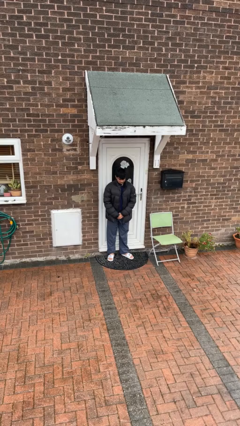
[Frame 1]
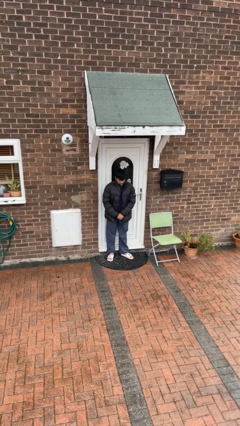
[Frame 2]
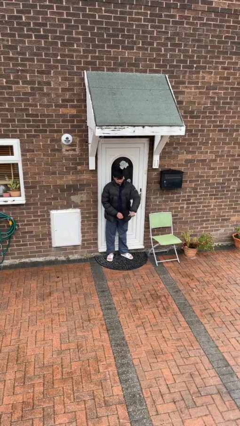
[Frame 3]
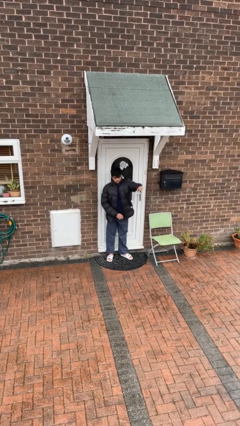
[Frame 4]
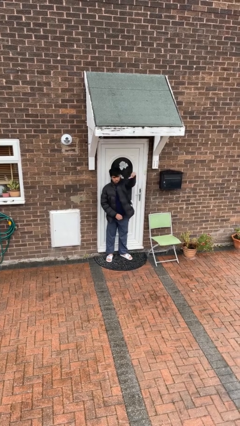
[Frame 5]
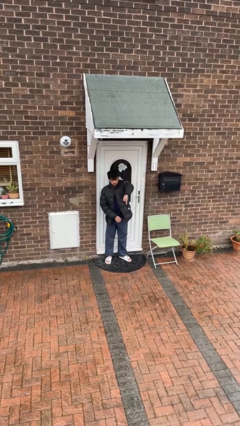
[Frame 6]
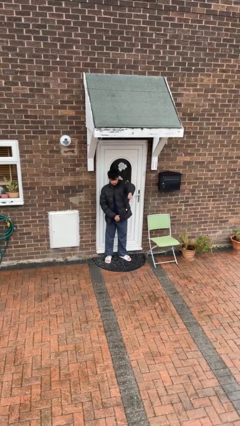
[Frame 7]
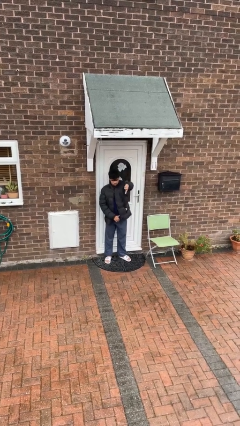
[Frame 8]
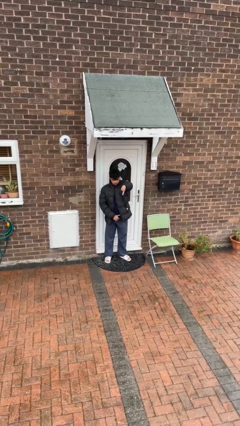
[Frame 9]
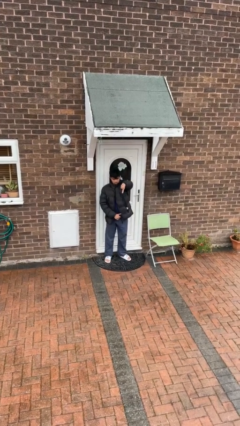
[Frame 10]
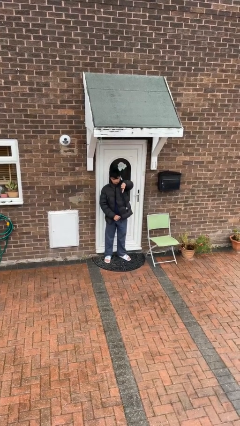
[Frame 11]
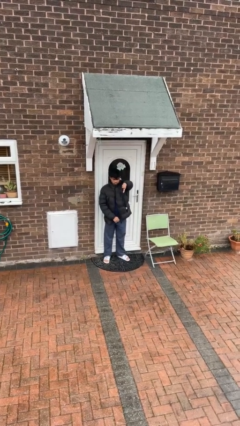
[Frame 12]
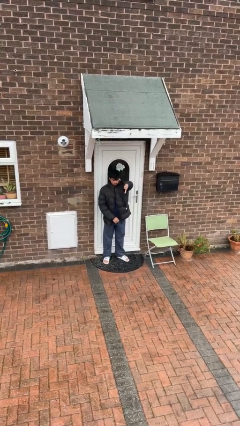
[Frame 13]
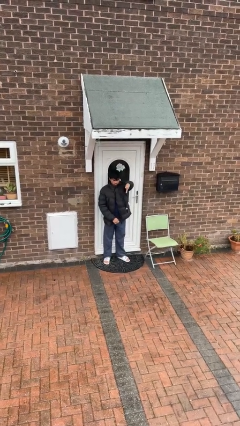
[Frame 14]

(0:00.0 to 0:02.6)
person gestures thumbs down

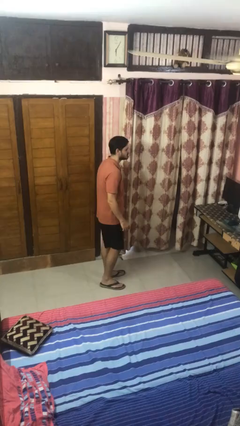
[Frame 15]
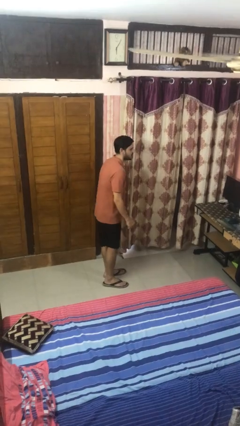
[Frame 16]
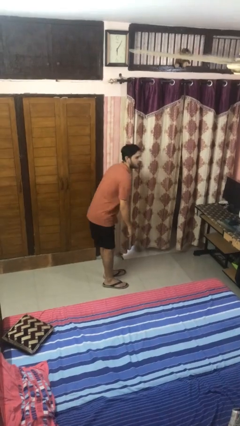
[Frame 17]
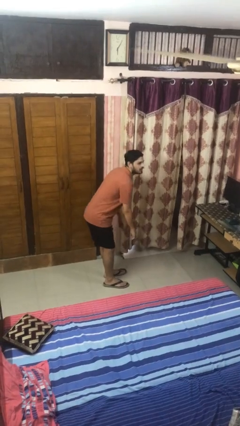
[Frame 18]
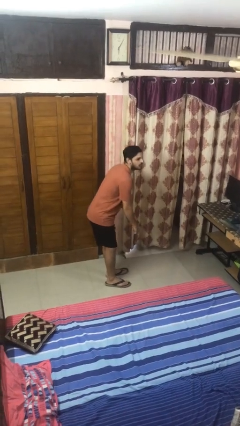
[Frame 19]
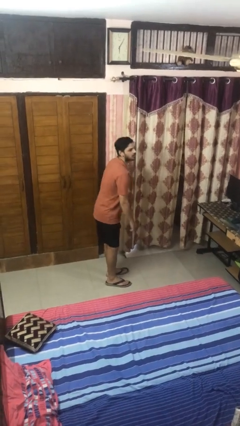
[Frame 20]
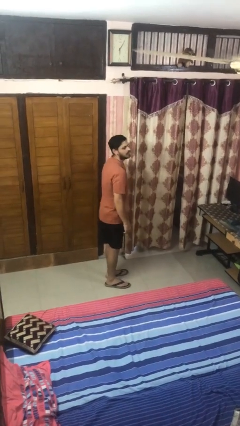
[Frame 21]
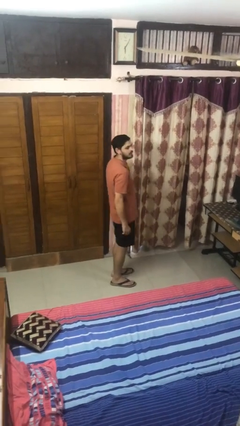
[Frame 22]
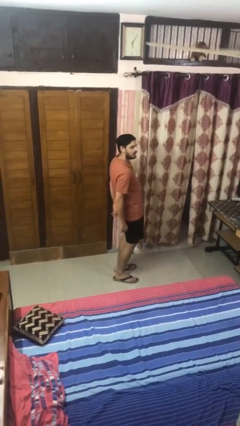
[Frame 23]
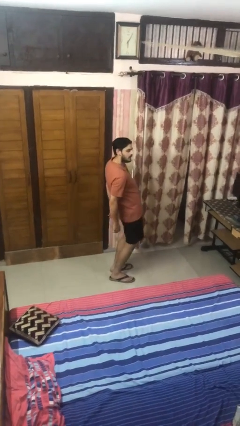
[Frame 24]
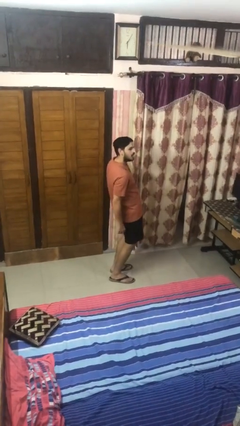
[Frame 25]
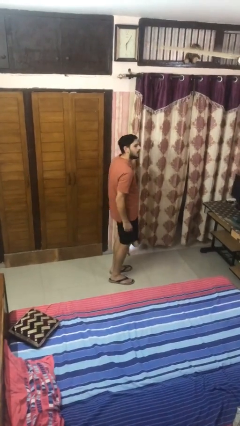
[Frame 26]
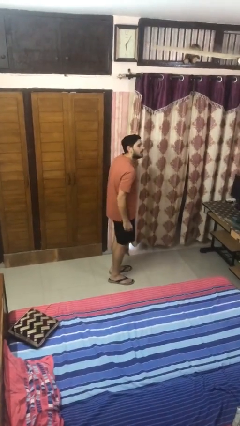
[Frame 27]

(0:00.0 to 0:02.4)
person wiggles hips

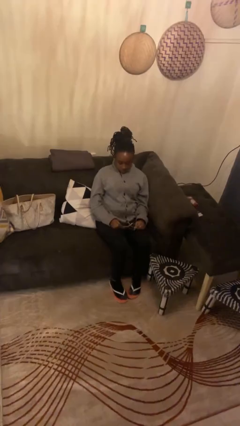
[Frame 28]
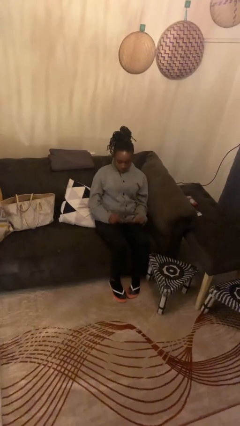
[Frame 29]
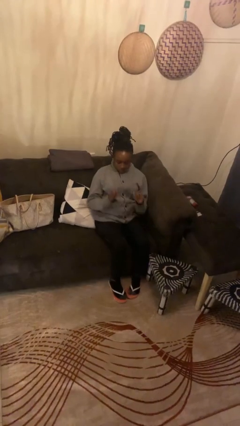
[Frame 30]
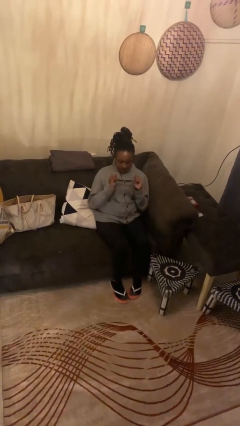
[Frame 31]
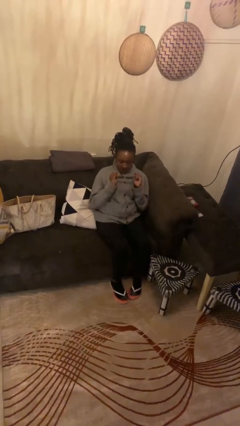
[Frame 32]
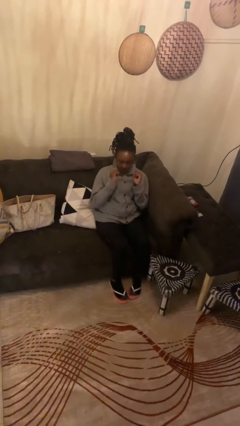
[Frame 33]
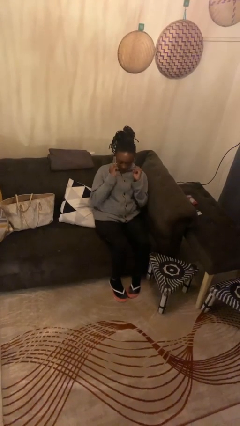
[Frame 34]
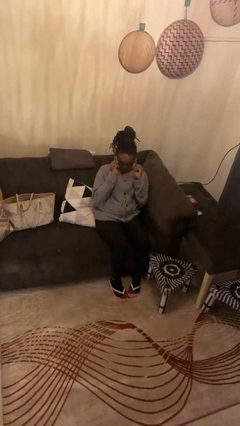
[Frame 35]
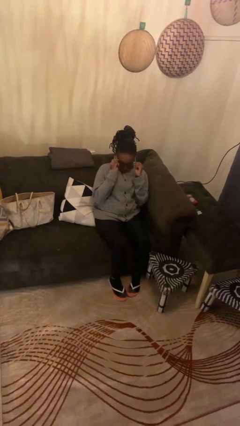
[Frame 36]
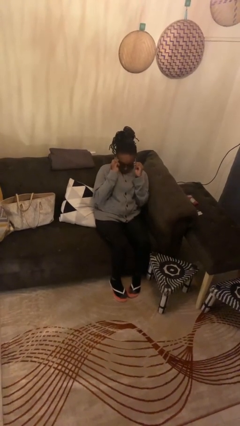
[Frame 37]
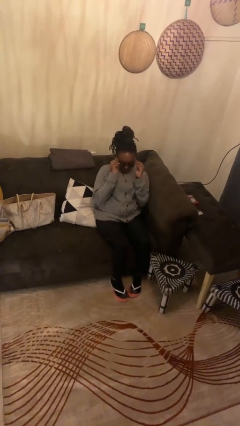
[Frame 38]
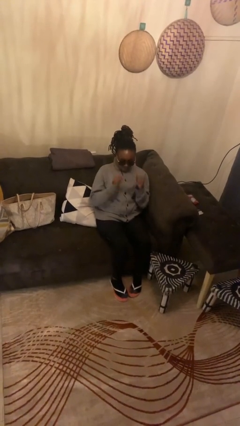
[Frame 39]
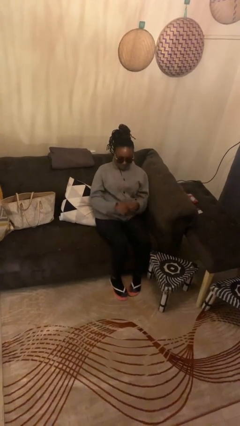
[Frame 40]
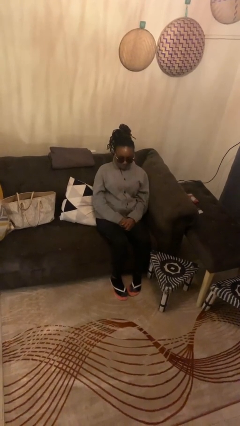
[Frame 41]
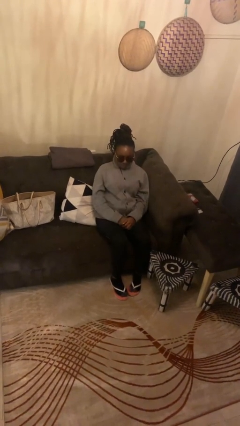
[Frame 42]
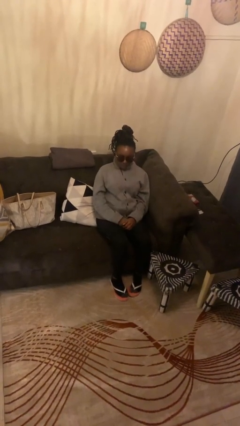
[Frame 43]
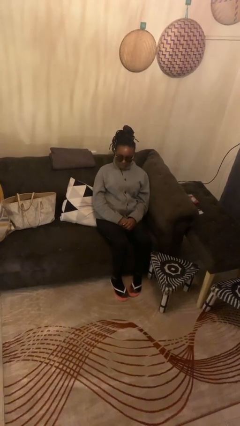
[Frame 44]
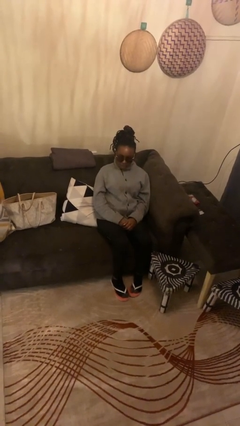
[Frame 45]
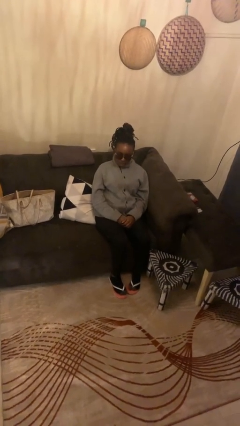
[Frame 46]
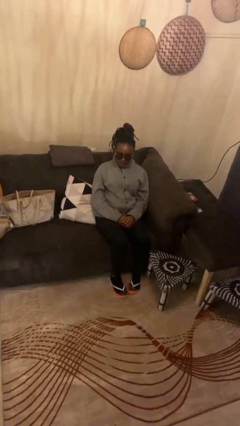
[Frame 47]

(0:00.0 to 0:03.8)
person puts on sunglasses

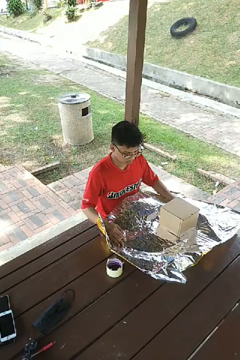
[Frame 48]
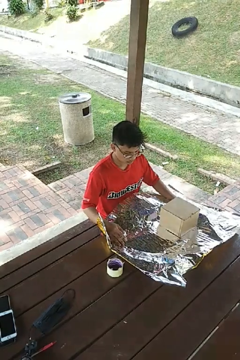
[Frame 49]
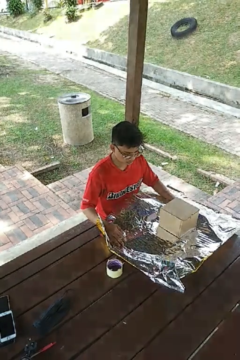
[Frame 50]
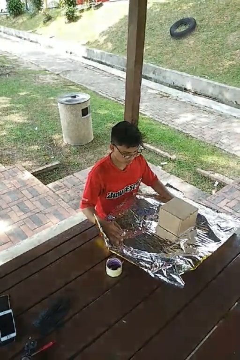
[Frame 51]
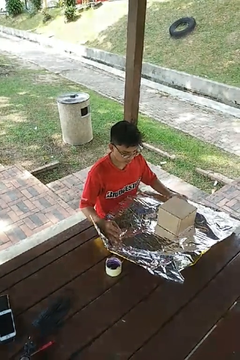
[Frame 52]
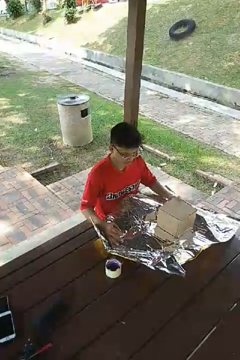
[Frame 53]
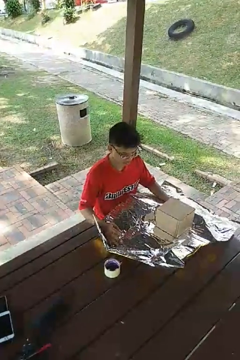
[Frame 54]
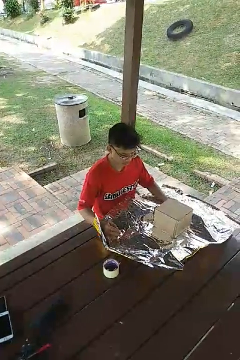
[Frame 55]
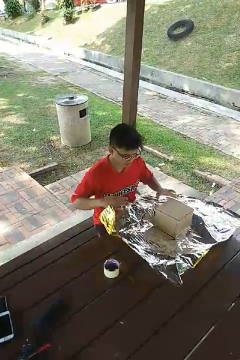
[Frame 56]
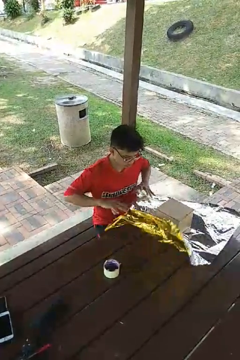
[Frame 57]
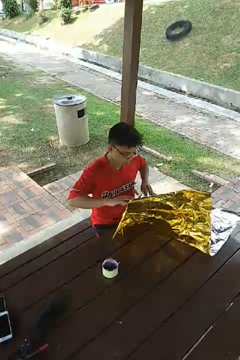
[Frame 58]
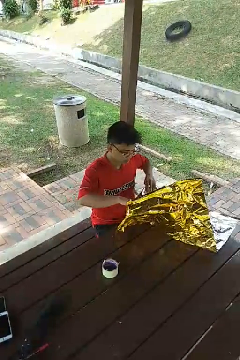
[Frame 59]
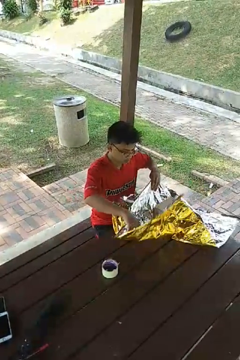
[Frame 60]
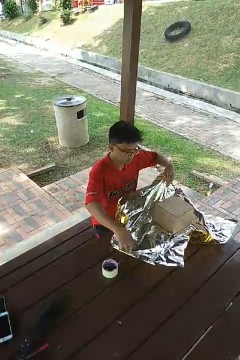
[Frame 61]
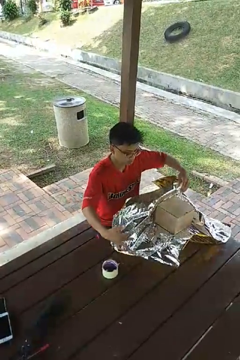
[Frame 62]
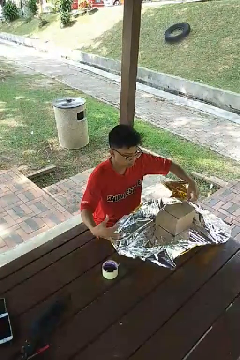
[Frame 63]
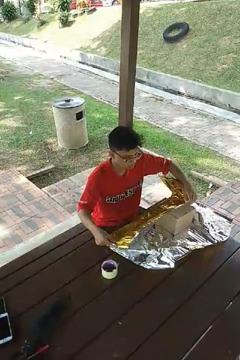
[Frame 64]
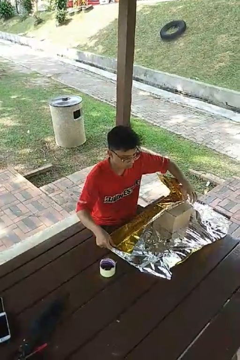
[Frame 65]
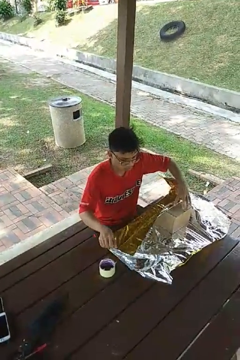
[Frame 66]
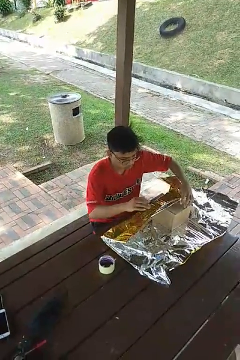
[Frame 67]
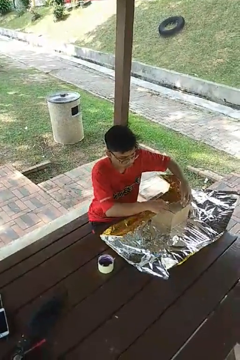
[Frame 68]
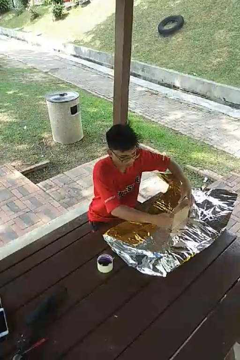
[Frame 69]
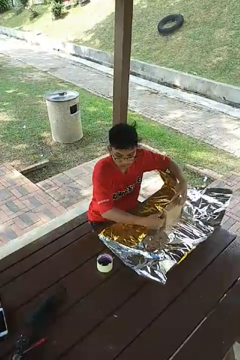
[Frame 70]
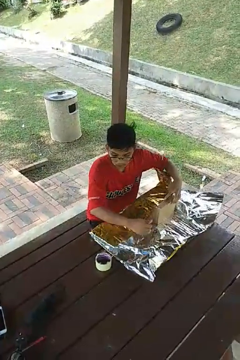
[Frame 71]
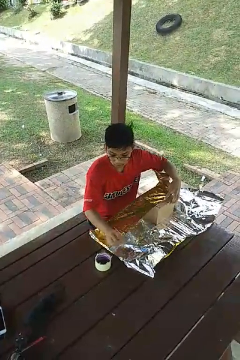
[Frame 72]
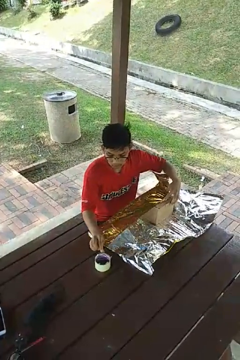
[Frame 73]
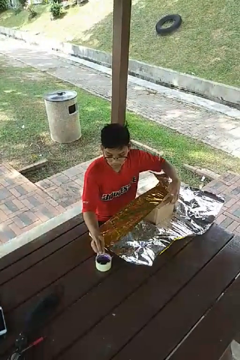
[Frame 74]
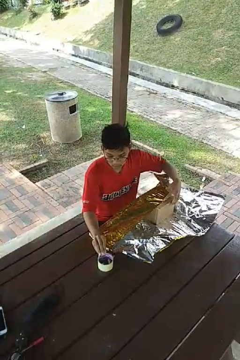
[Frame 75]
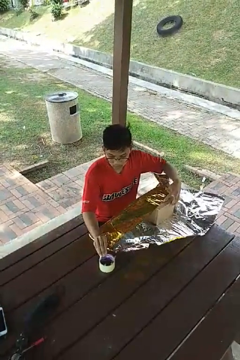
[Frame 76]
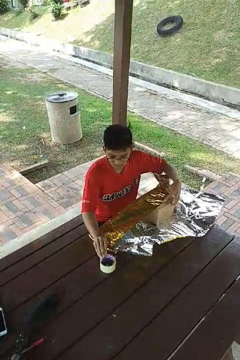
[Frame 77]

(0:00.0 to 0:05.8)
person wraps box

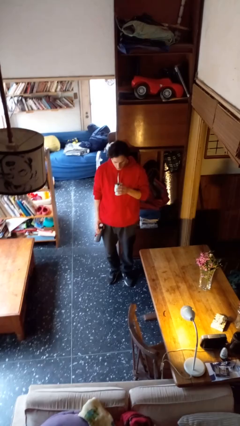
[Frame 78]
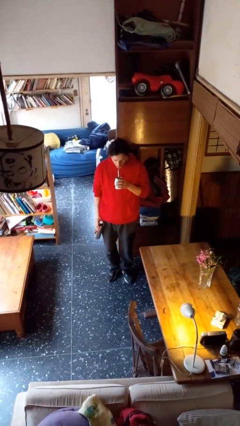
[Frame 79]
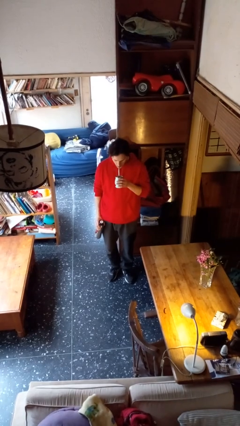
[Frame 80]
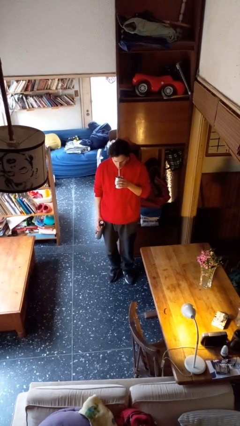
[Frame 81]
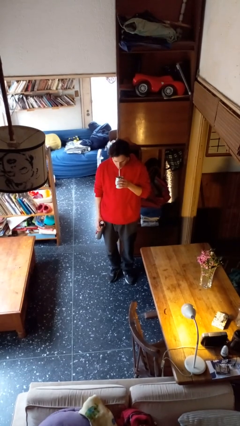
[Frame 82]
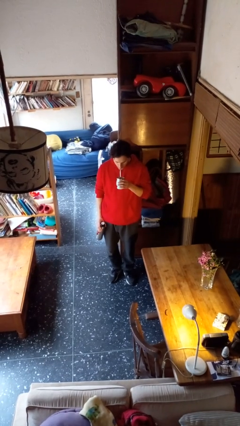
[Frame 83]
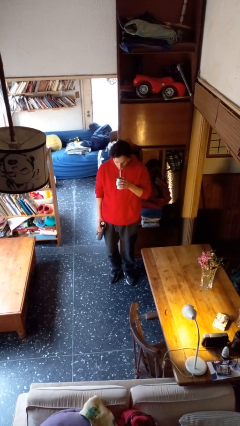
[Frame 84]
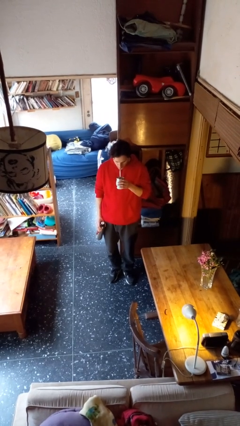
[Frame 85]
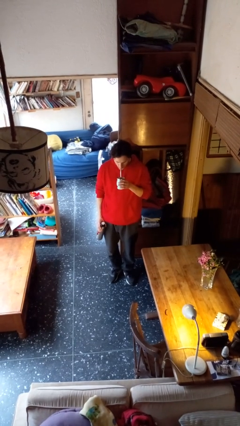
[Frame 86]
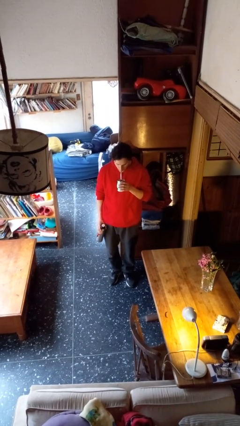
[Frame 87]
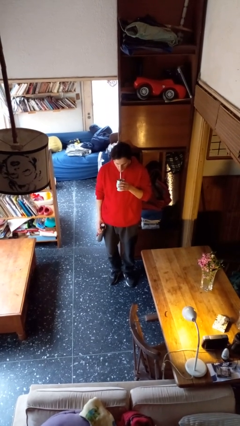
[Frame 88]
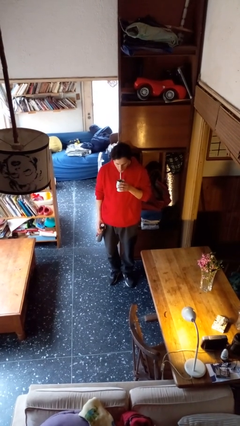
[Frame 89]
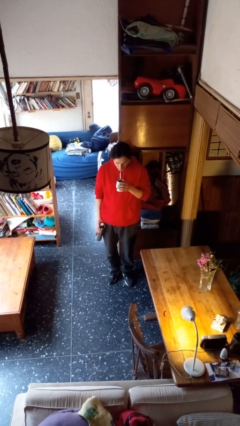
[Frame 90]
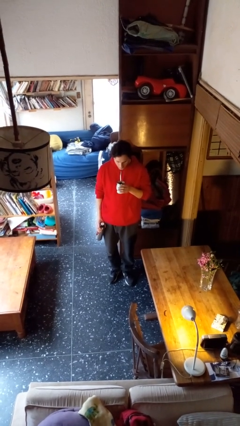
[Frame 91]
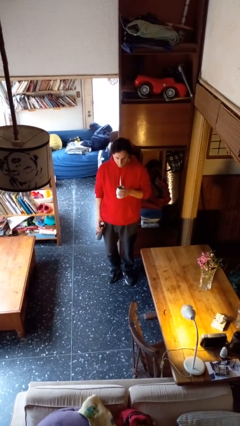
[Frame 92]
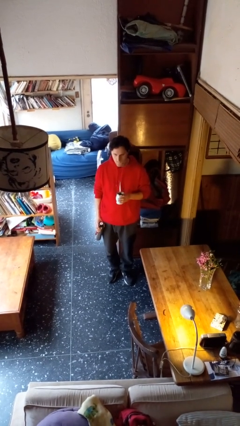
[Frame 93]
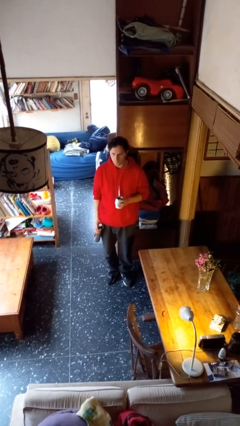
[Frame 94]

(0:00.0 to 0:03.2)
person drinks from straw

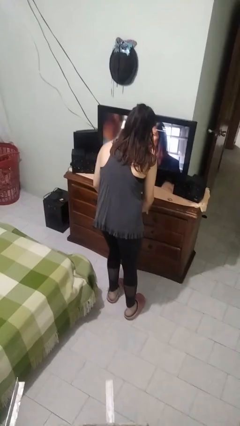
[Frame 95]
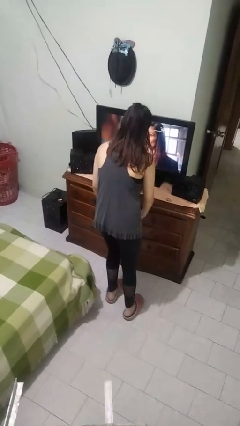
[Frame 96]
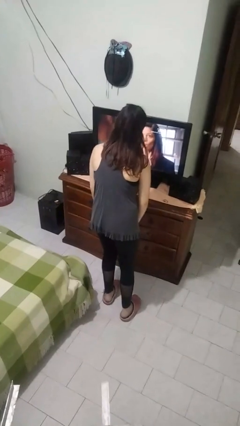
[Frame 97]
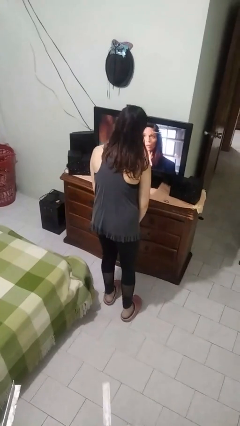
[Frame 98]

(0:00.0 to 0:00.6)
person closes dresser drawer
